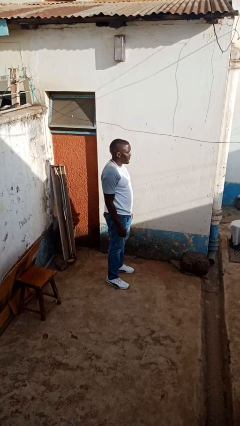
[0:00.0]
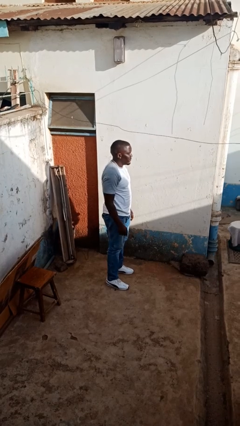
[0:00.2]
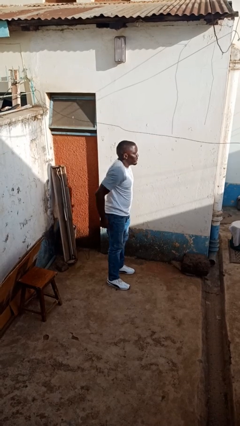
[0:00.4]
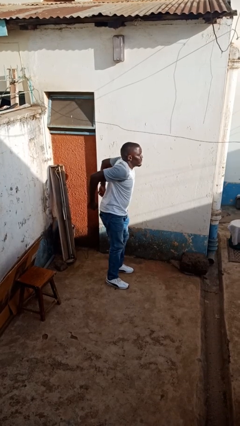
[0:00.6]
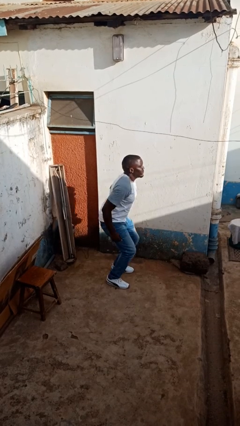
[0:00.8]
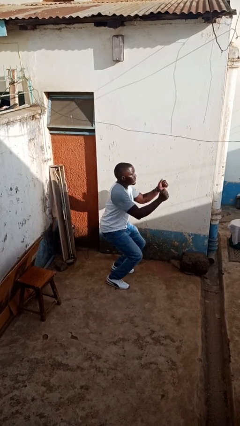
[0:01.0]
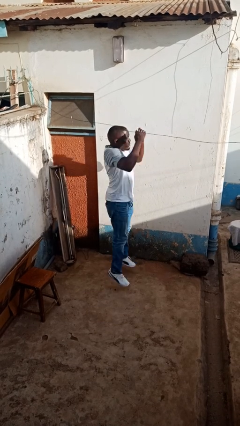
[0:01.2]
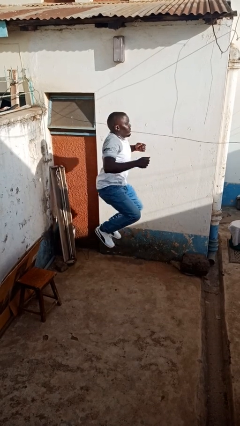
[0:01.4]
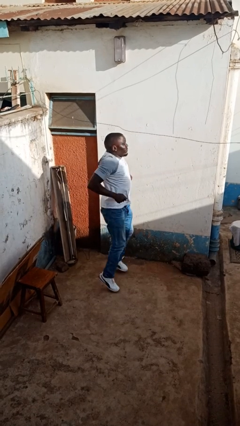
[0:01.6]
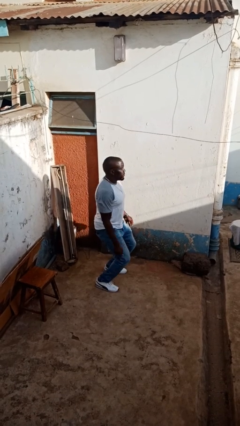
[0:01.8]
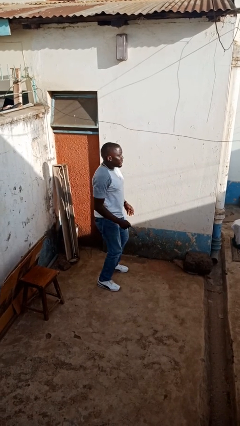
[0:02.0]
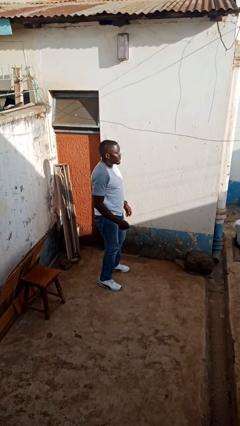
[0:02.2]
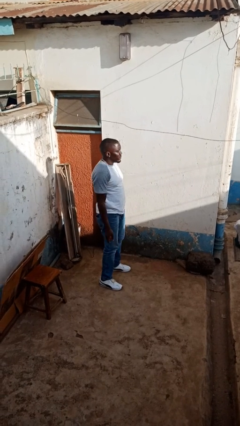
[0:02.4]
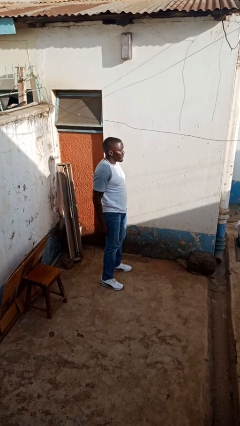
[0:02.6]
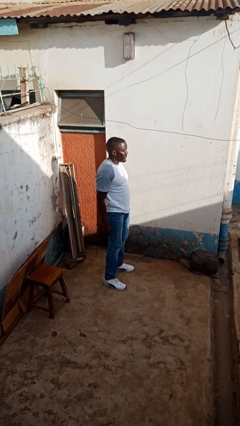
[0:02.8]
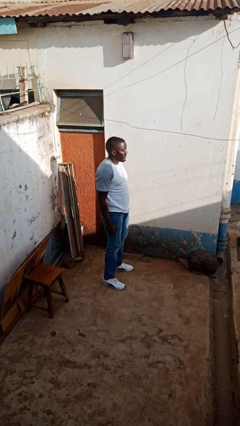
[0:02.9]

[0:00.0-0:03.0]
person jumps

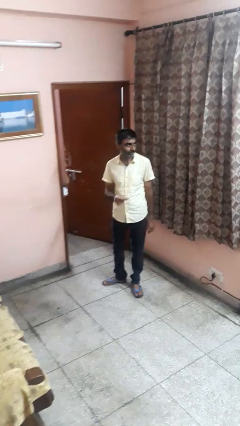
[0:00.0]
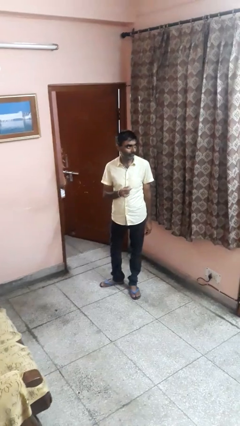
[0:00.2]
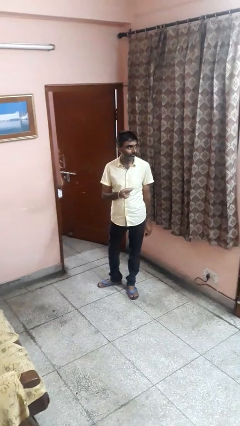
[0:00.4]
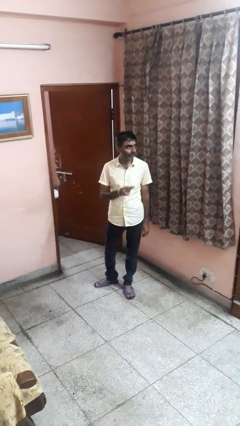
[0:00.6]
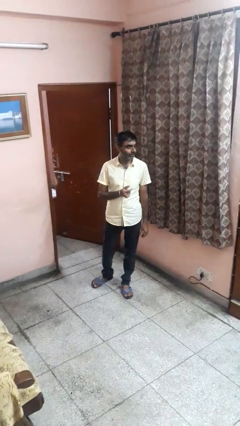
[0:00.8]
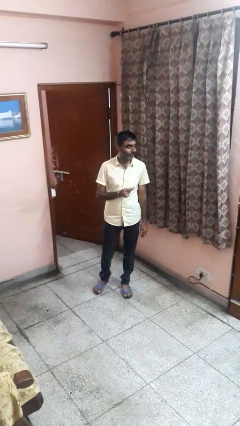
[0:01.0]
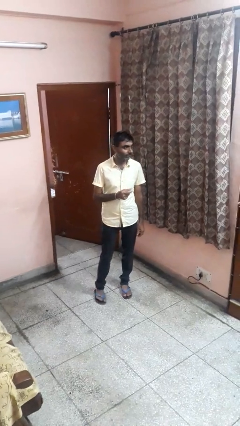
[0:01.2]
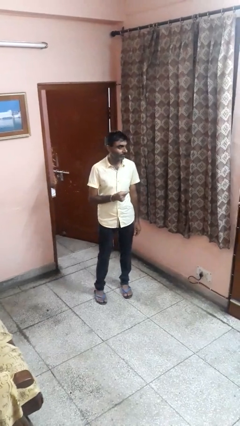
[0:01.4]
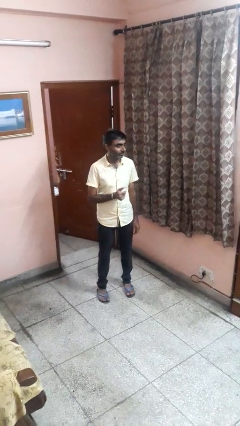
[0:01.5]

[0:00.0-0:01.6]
person snaps fingers

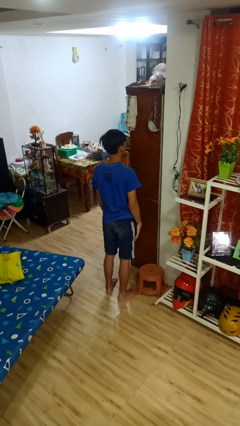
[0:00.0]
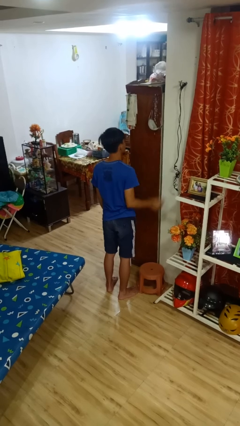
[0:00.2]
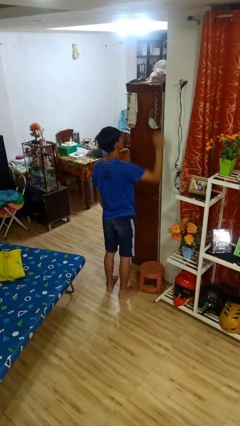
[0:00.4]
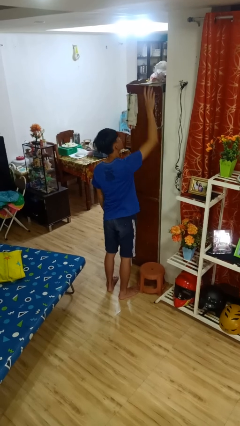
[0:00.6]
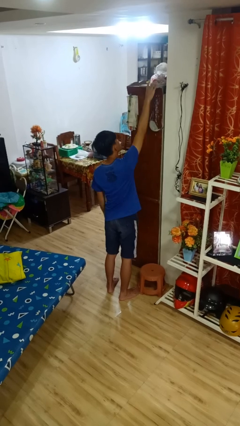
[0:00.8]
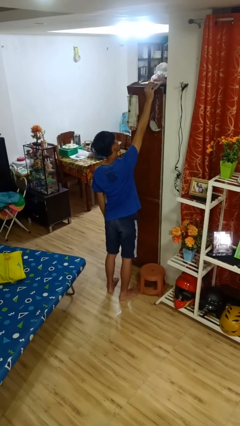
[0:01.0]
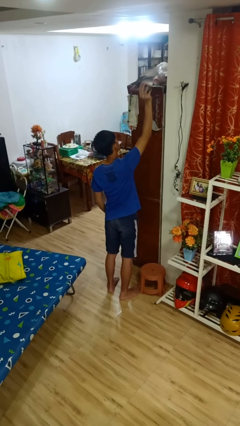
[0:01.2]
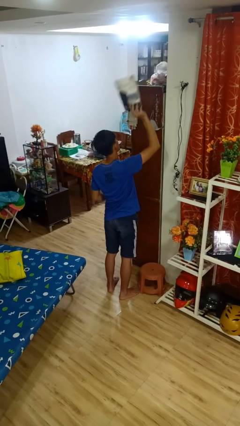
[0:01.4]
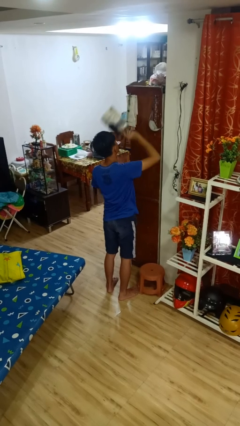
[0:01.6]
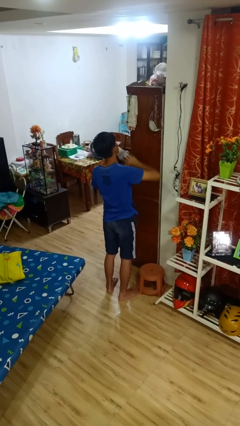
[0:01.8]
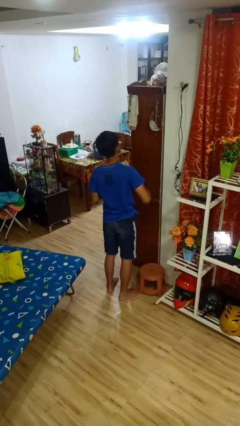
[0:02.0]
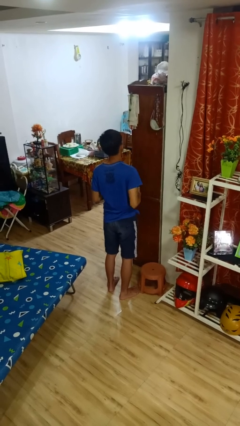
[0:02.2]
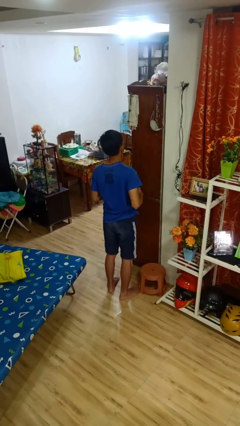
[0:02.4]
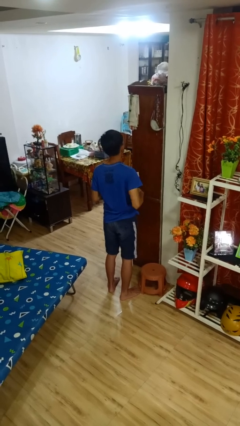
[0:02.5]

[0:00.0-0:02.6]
person picks up object from shelf

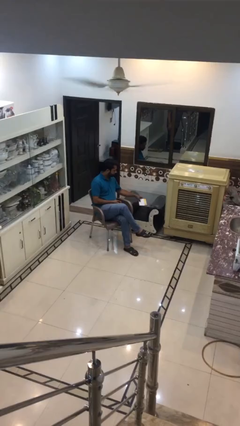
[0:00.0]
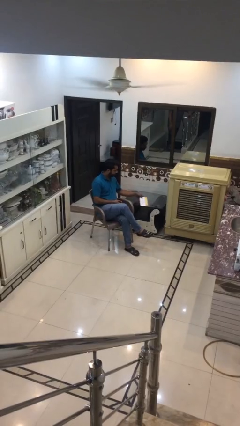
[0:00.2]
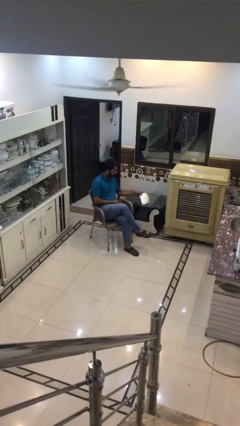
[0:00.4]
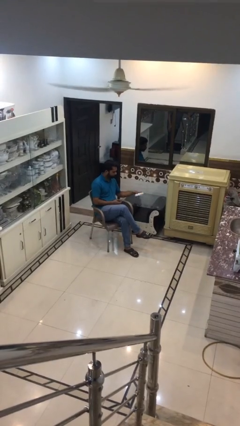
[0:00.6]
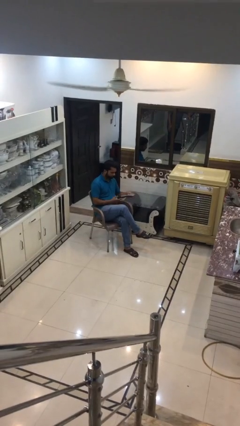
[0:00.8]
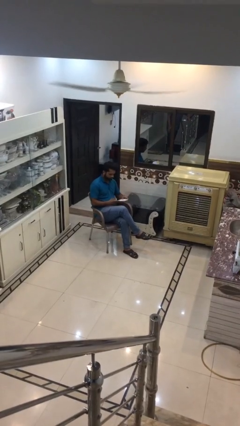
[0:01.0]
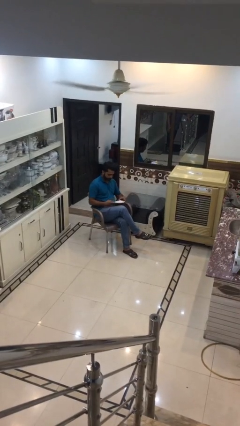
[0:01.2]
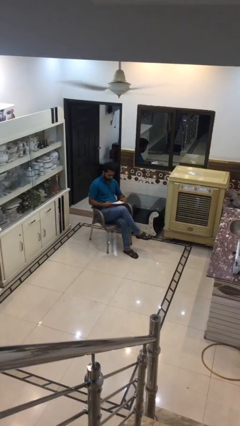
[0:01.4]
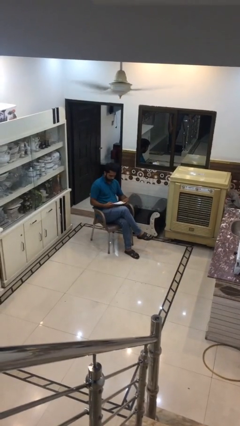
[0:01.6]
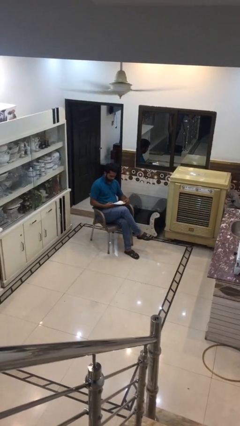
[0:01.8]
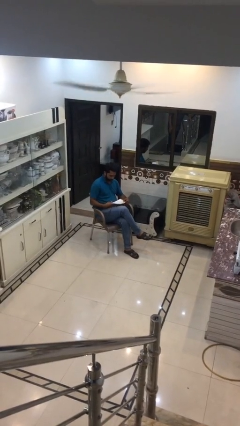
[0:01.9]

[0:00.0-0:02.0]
person picks up object from table

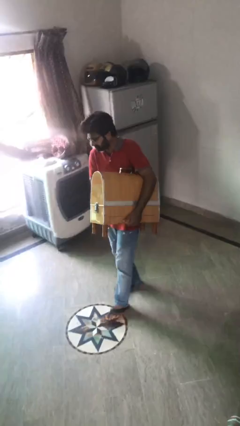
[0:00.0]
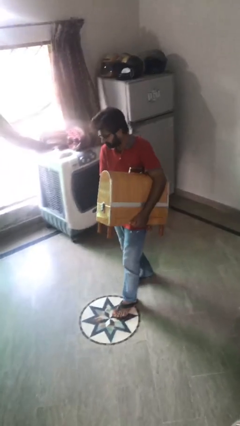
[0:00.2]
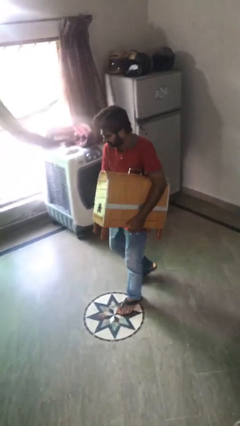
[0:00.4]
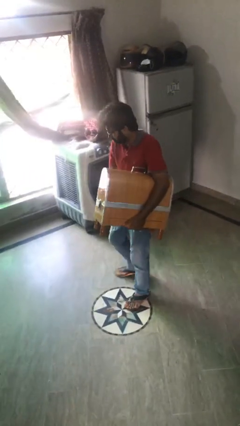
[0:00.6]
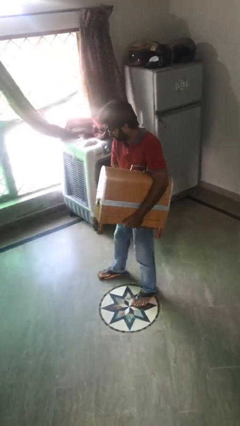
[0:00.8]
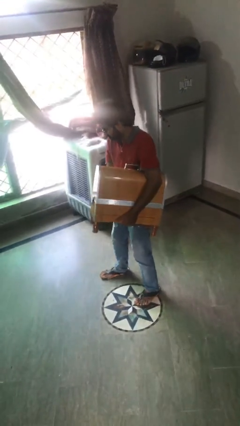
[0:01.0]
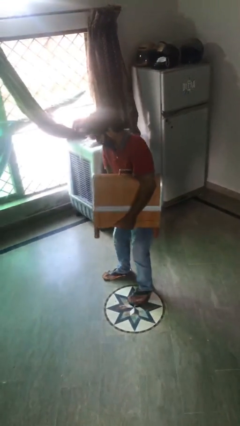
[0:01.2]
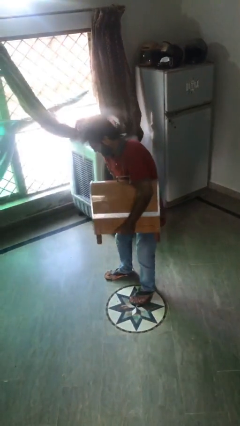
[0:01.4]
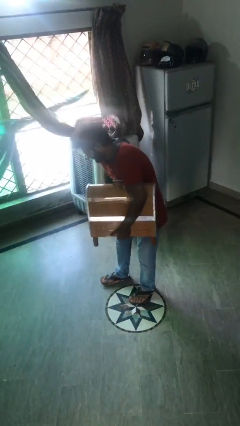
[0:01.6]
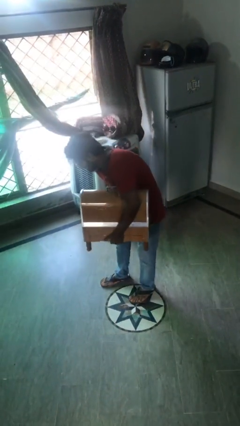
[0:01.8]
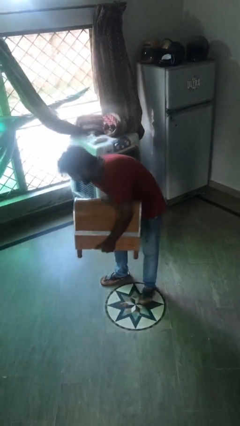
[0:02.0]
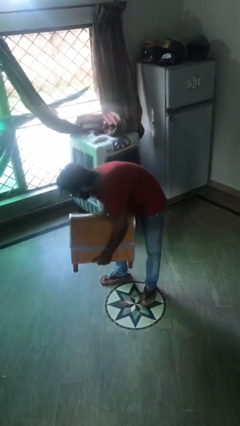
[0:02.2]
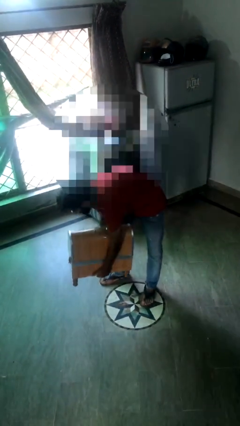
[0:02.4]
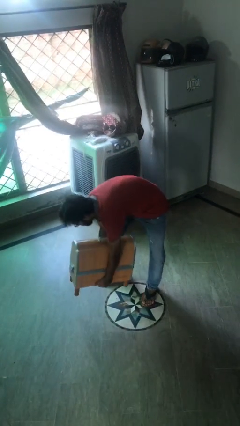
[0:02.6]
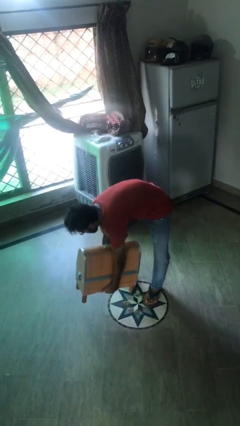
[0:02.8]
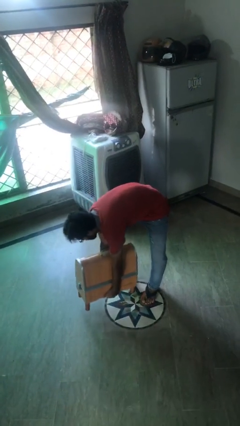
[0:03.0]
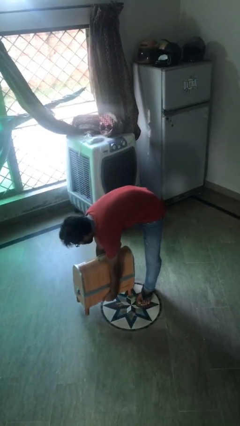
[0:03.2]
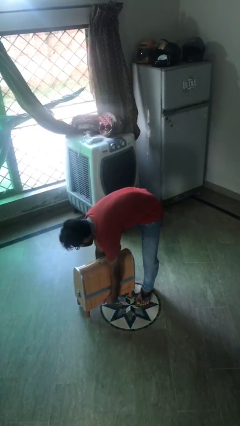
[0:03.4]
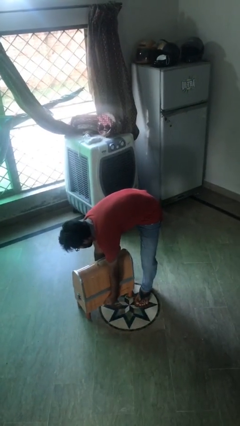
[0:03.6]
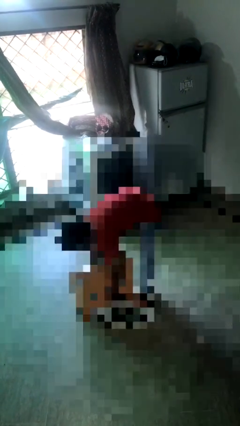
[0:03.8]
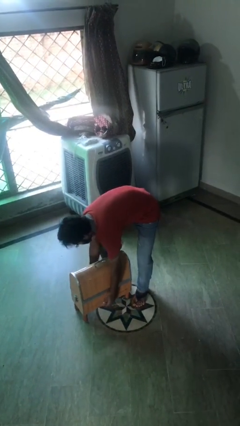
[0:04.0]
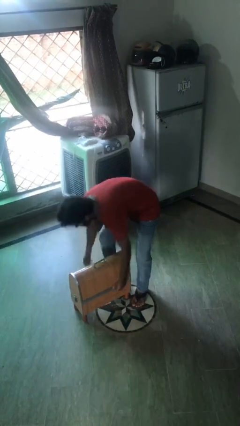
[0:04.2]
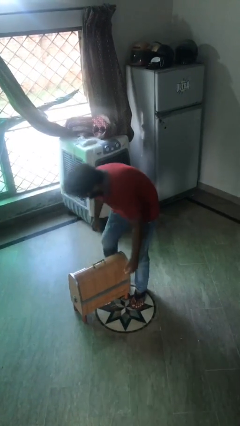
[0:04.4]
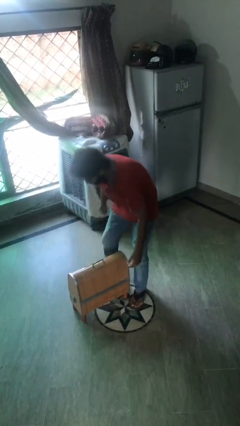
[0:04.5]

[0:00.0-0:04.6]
person puts down object on floor

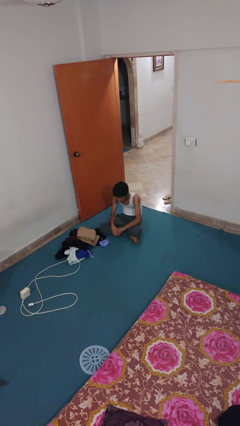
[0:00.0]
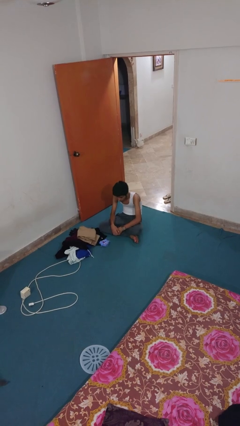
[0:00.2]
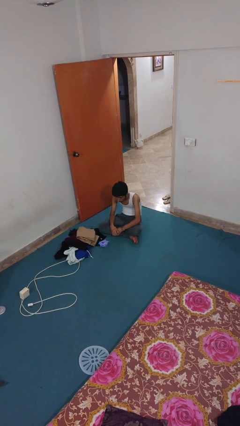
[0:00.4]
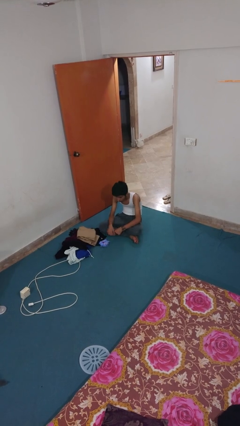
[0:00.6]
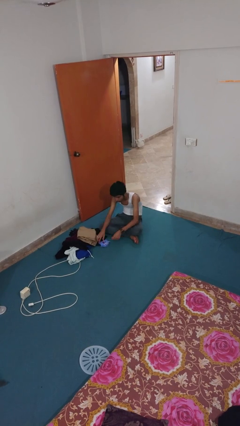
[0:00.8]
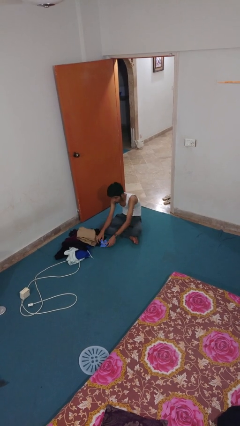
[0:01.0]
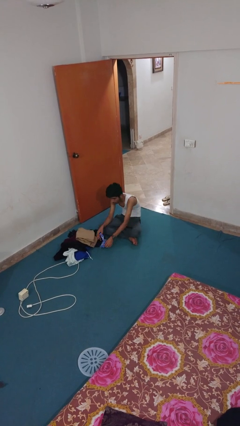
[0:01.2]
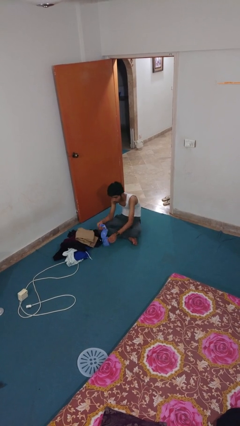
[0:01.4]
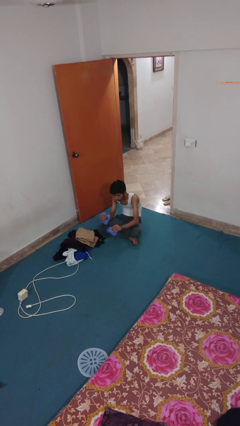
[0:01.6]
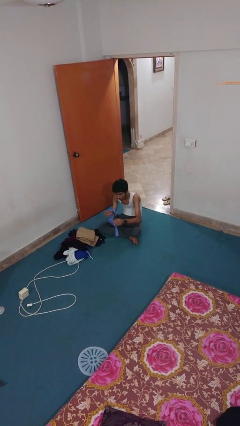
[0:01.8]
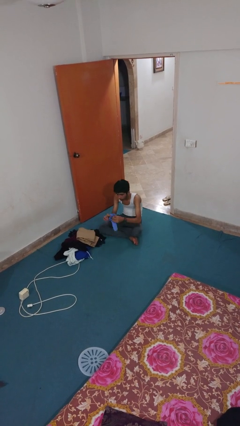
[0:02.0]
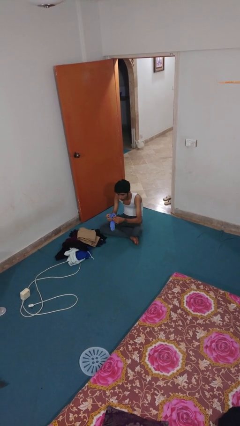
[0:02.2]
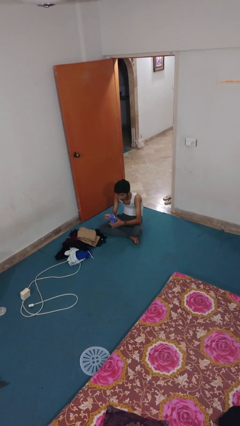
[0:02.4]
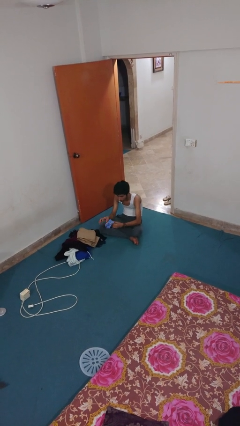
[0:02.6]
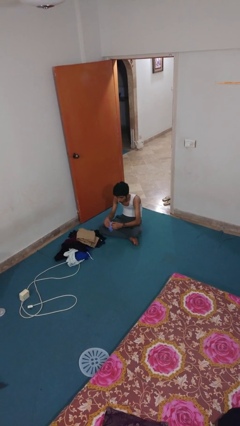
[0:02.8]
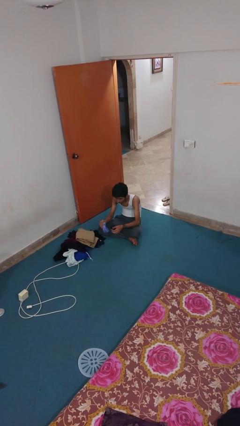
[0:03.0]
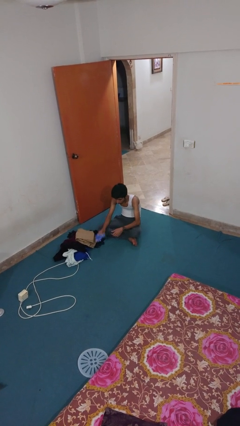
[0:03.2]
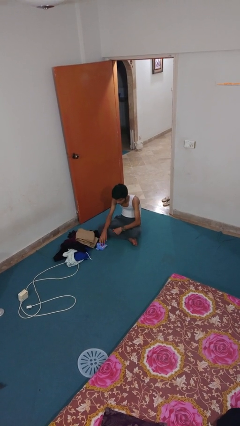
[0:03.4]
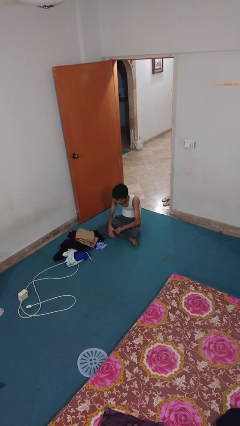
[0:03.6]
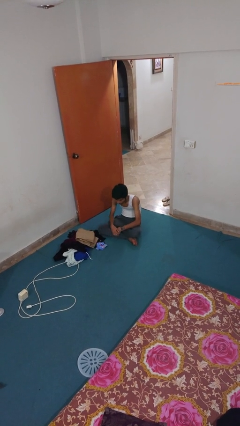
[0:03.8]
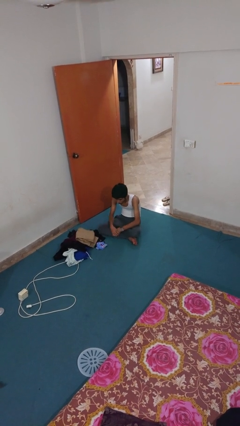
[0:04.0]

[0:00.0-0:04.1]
person folds socks
